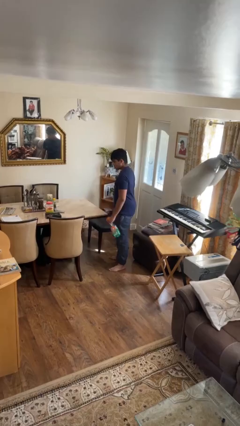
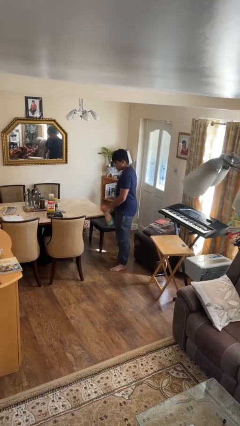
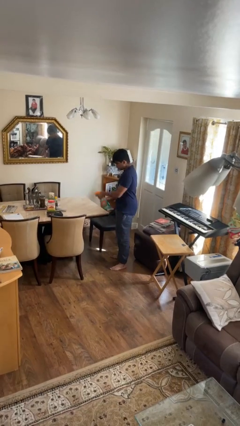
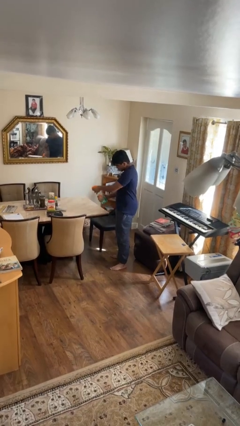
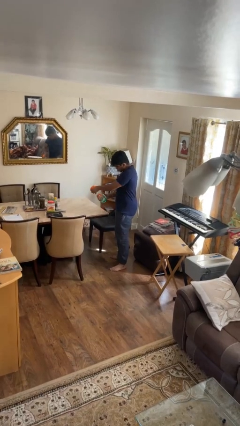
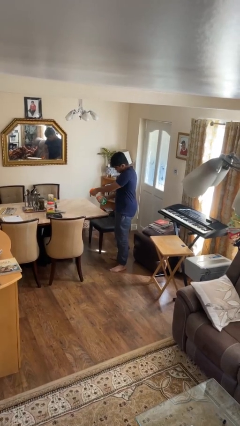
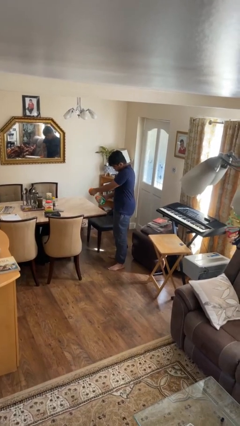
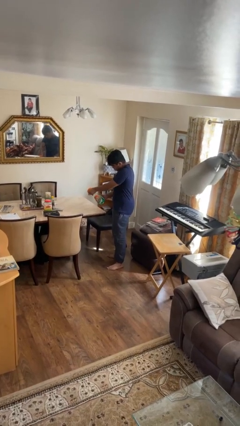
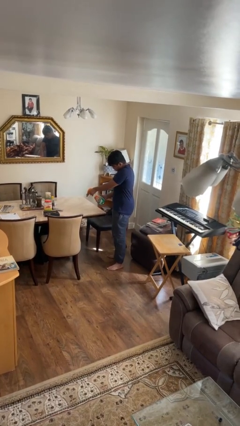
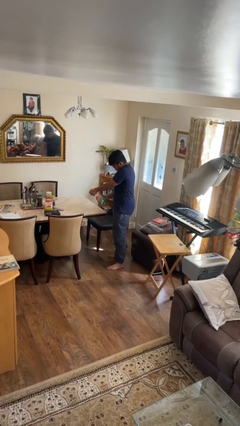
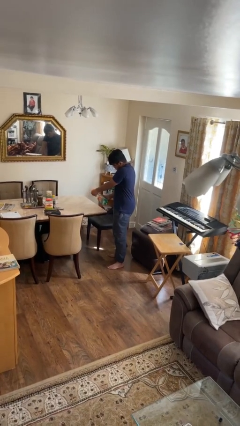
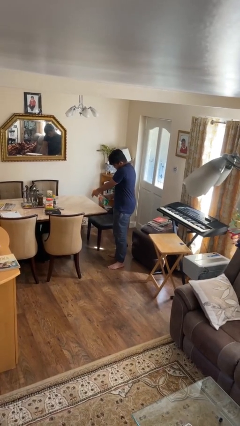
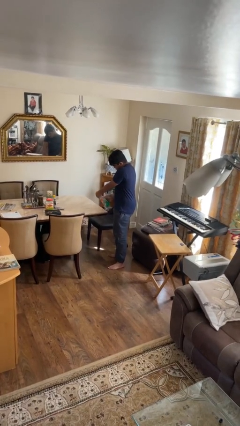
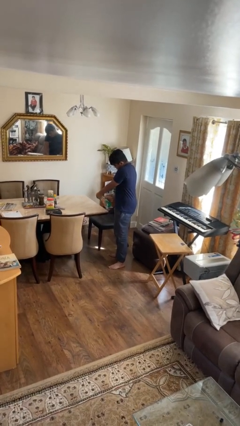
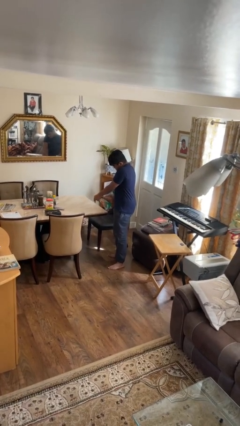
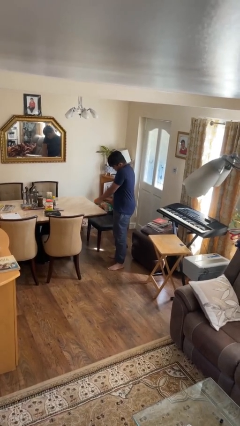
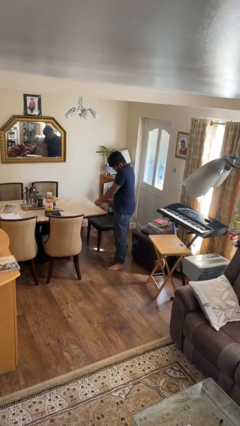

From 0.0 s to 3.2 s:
person sprays from bottle

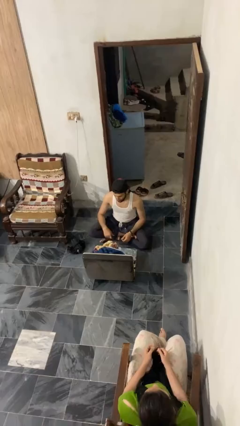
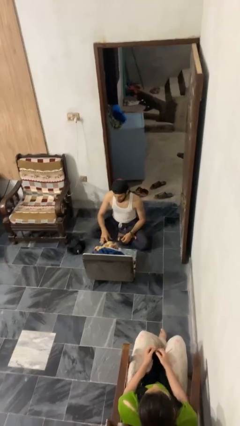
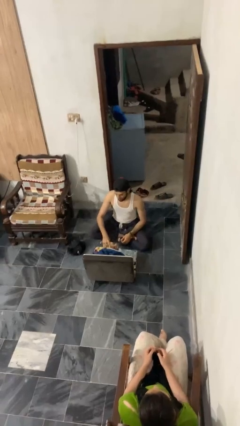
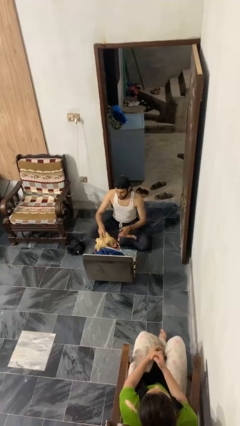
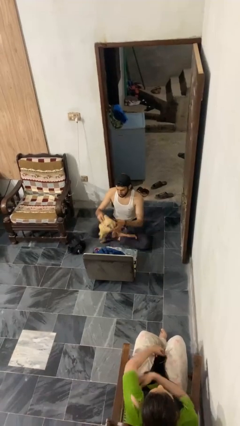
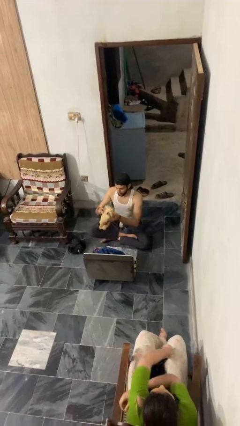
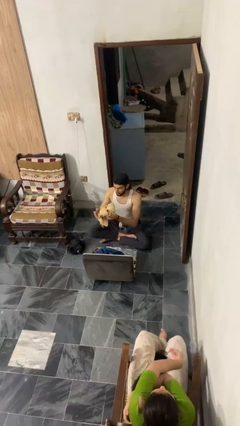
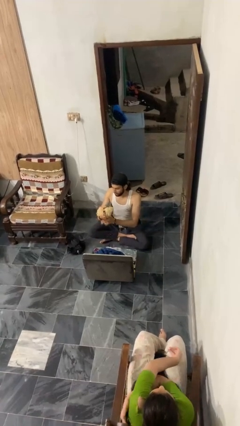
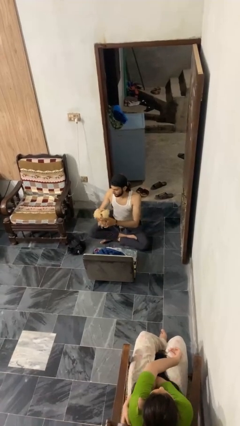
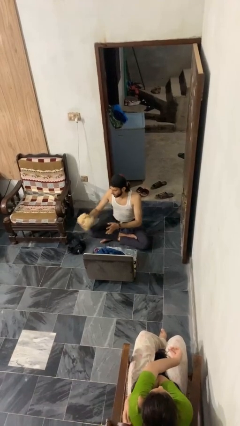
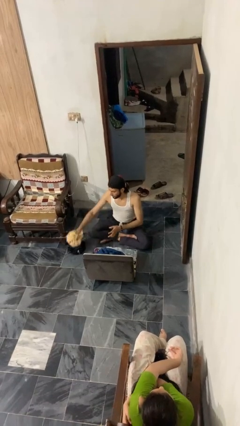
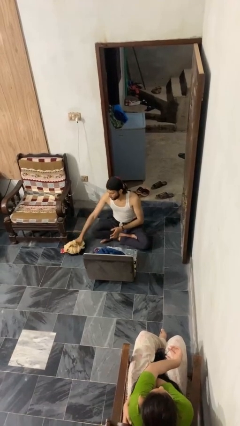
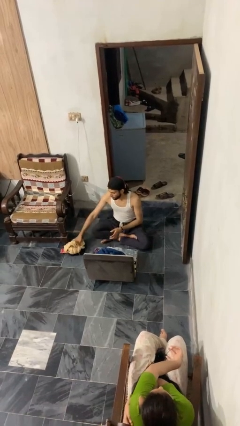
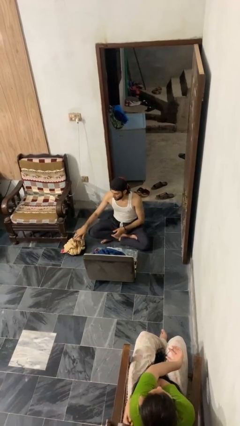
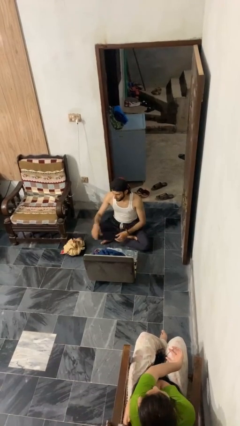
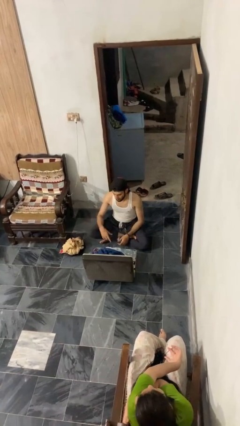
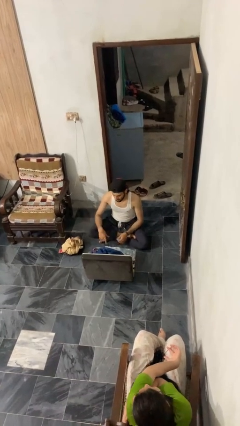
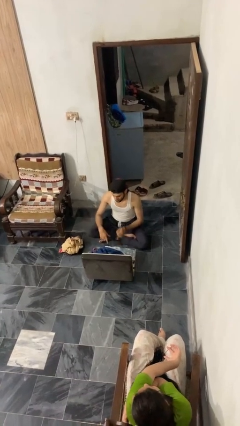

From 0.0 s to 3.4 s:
person unloads clothes from suitcase

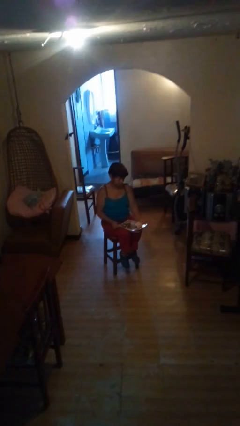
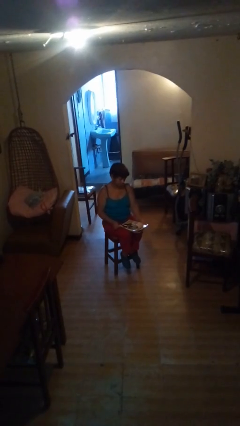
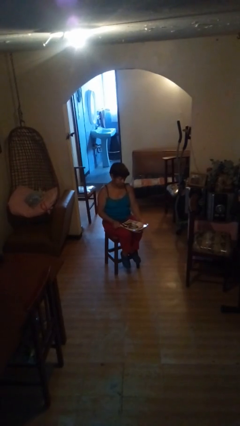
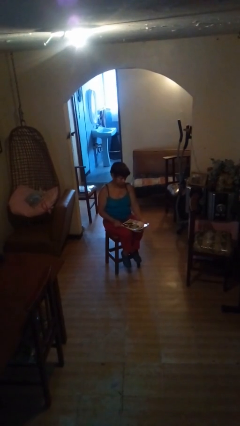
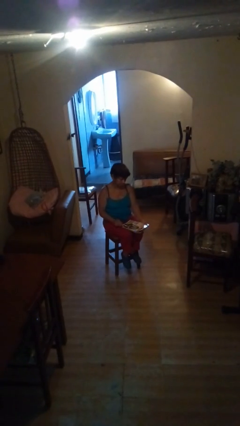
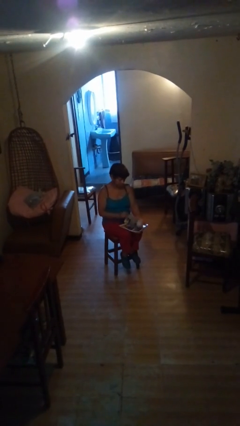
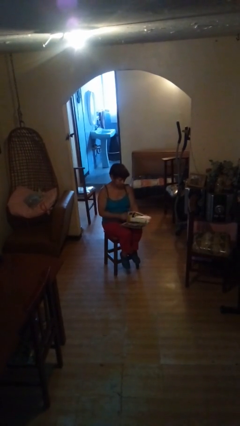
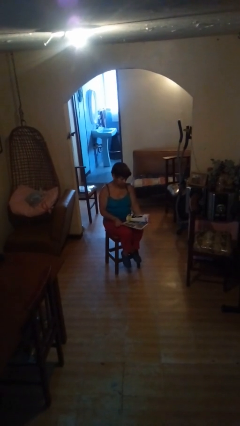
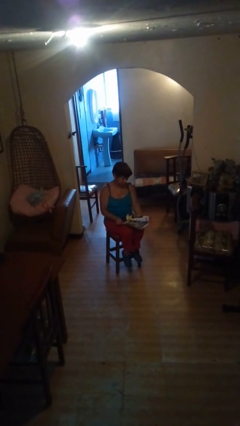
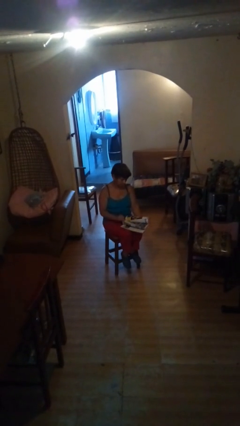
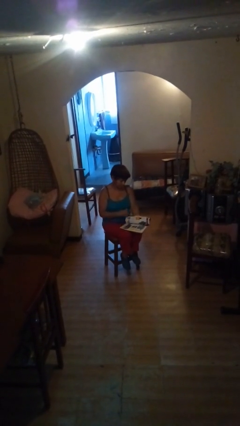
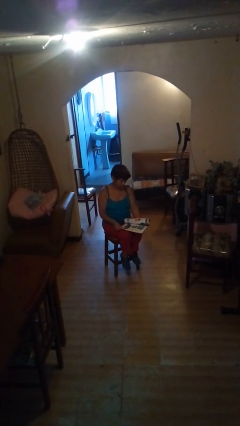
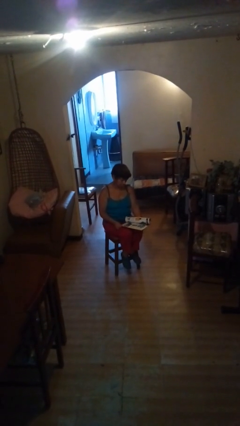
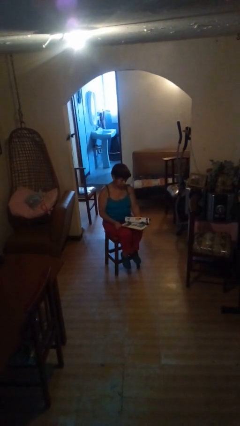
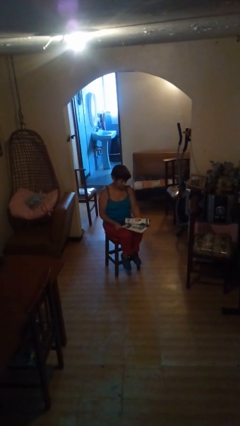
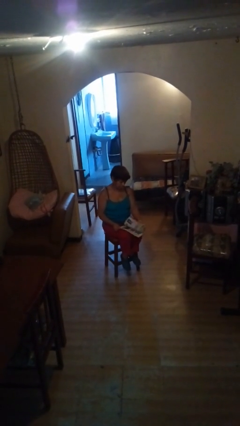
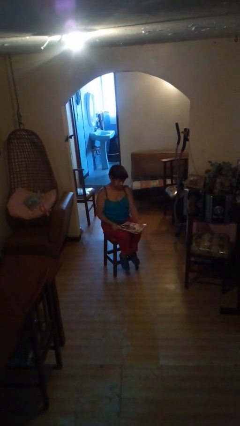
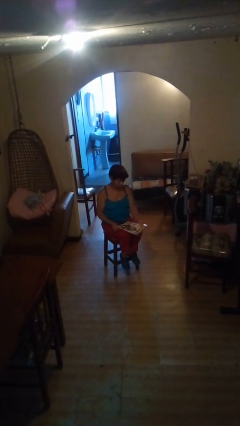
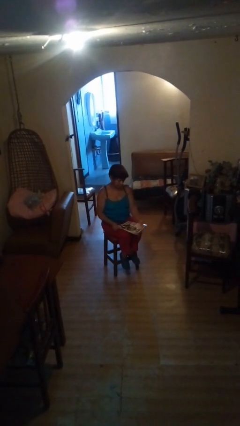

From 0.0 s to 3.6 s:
person reads magazine

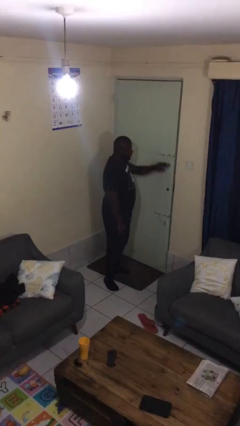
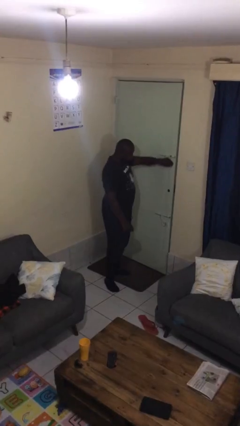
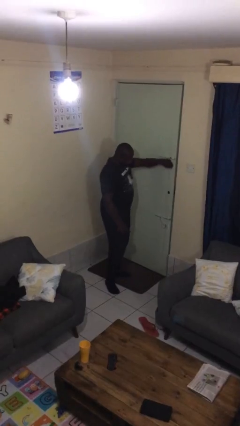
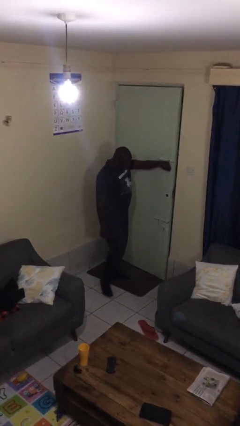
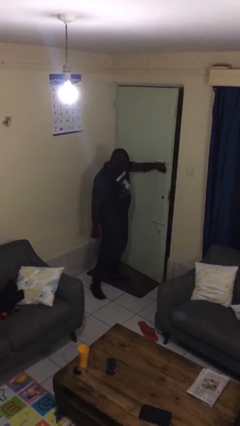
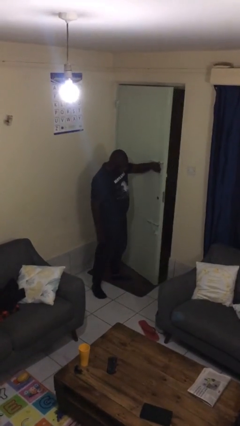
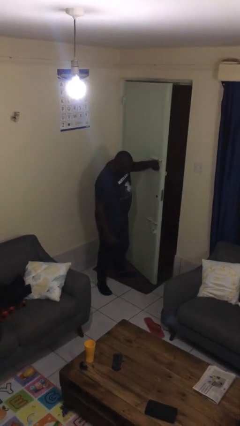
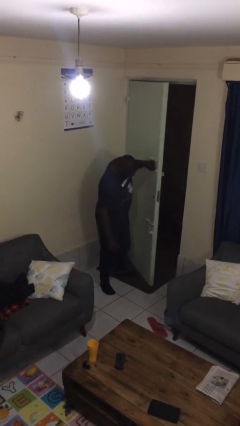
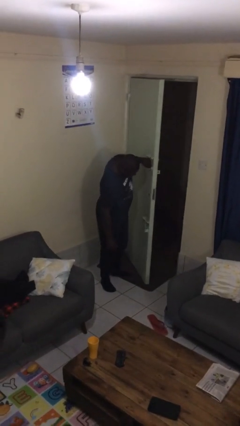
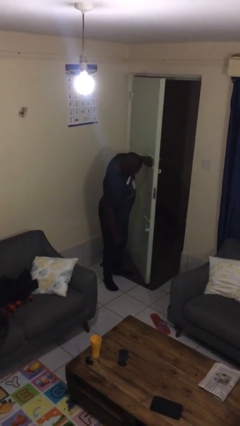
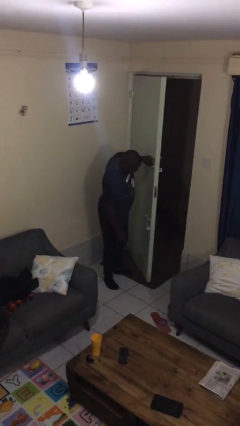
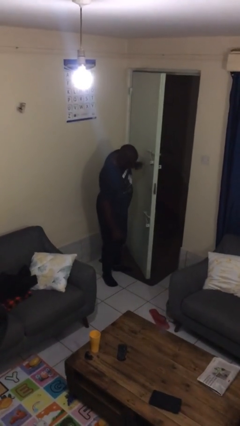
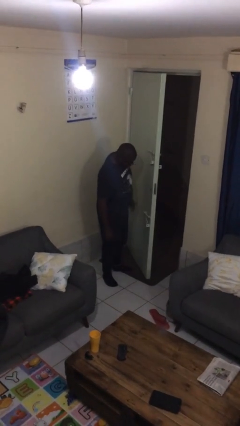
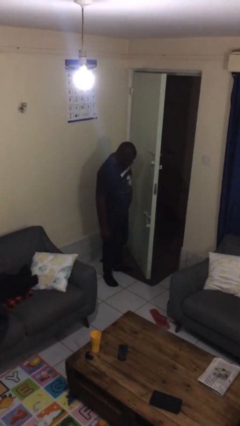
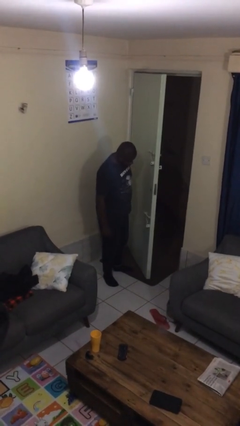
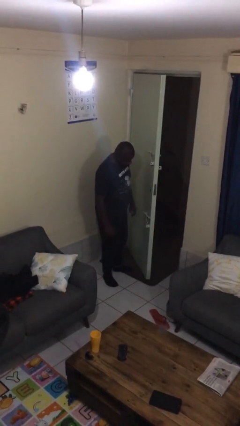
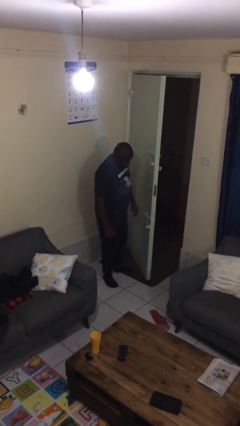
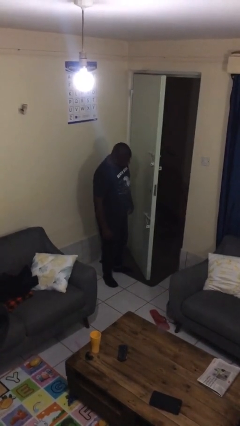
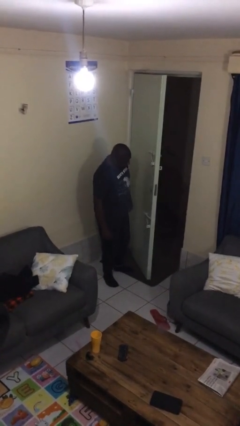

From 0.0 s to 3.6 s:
person opens facility door

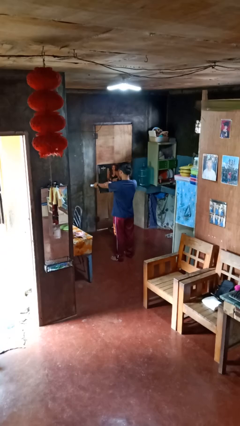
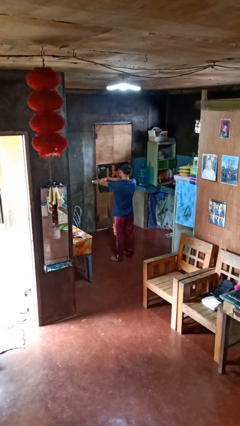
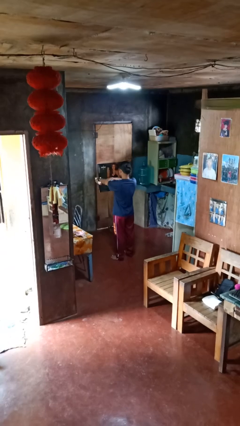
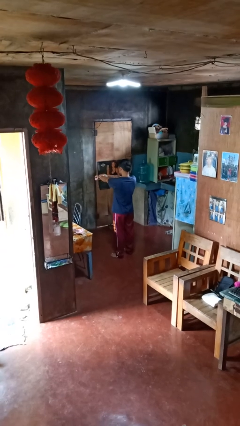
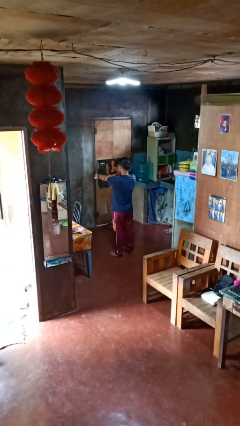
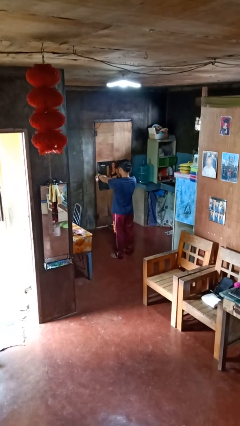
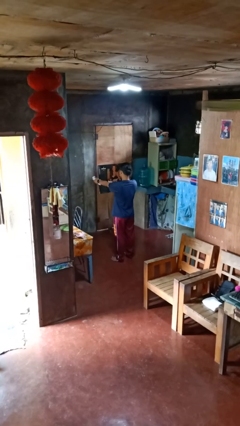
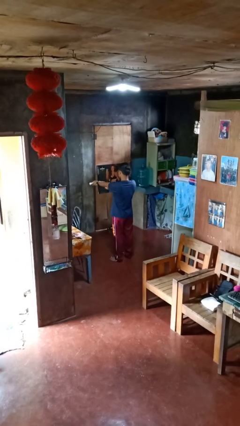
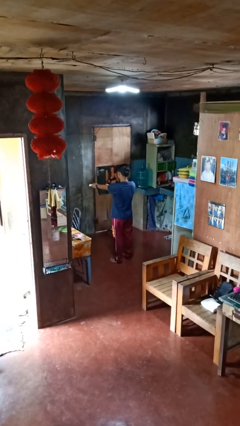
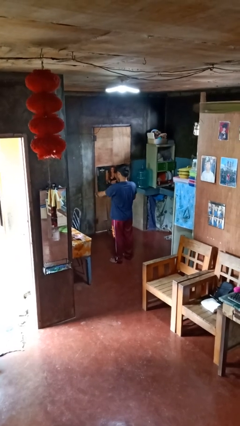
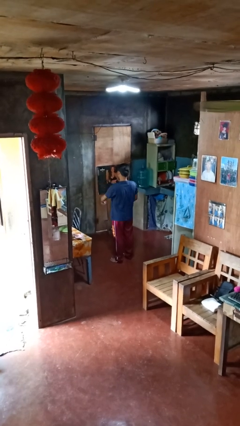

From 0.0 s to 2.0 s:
person applies sunscreen

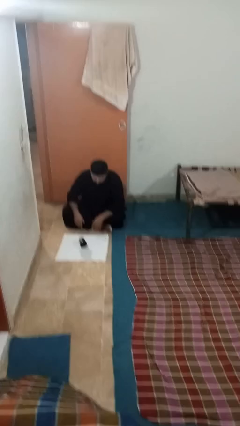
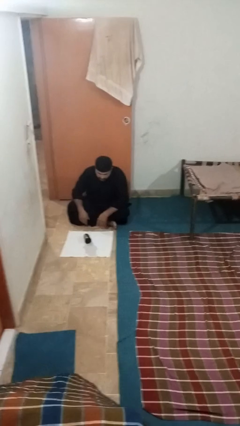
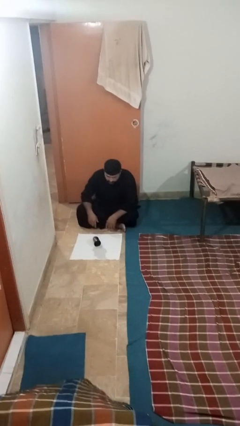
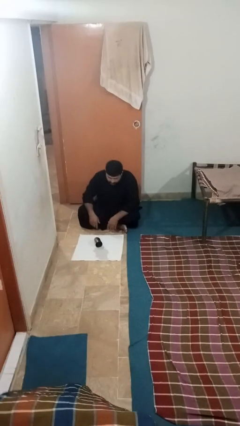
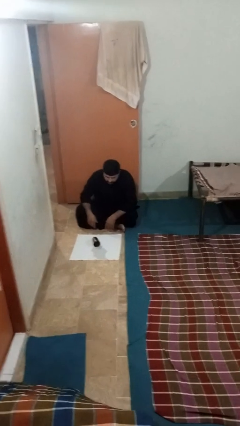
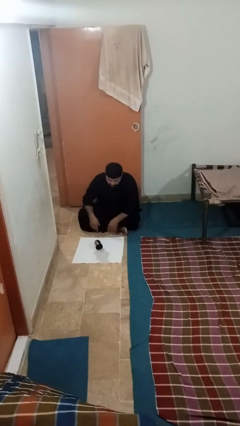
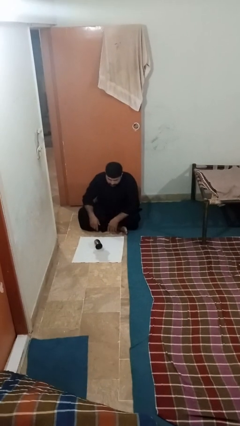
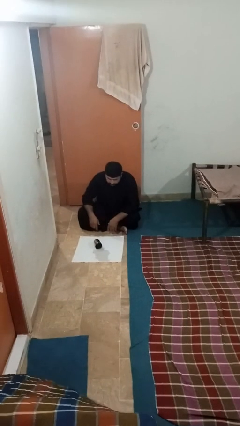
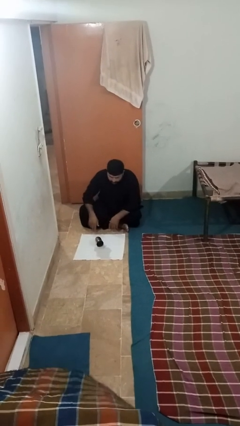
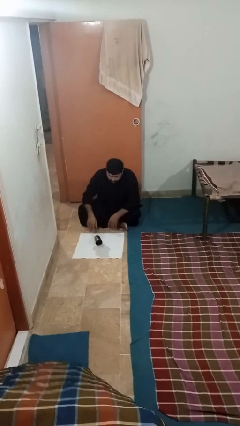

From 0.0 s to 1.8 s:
person sets upright glass
